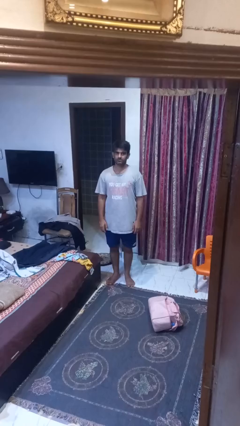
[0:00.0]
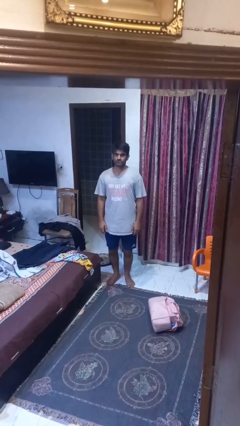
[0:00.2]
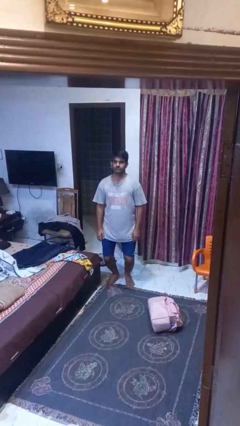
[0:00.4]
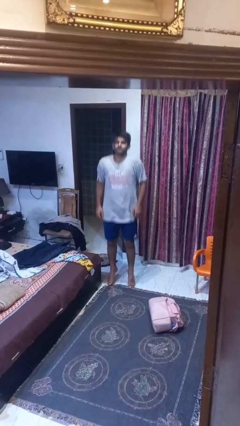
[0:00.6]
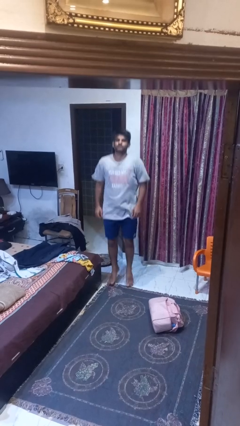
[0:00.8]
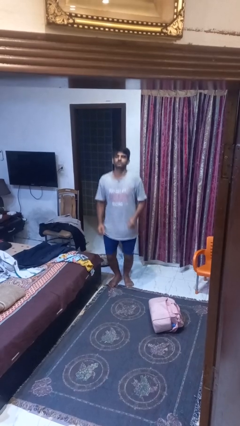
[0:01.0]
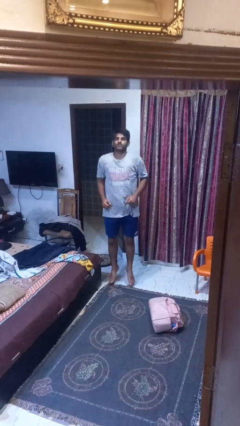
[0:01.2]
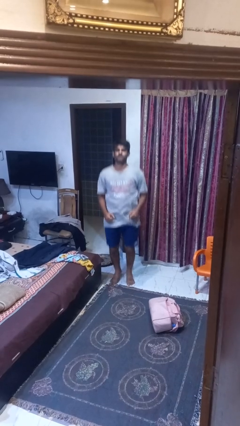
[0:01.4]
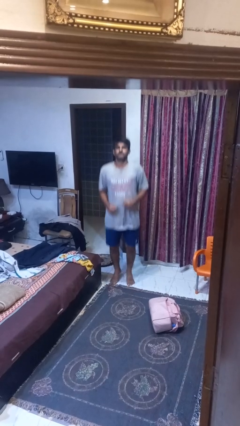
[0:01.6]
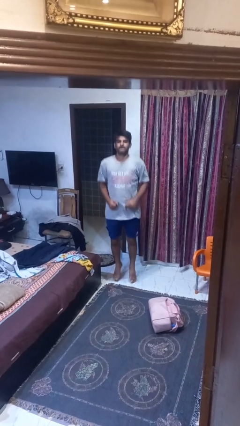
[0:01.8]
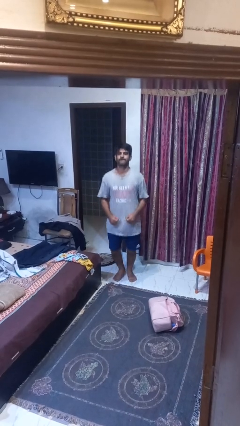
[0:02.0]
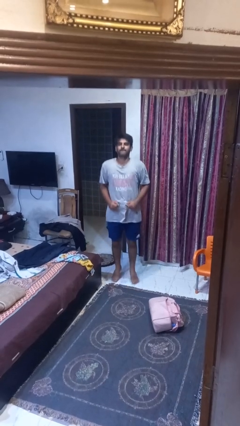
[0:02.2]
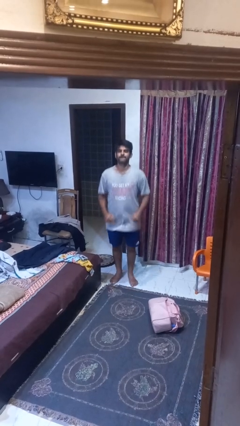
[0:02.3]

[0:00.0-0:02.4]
person jumps

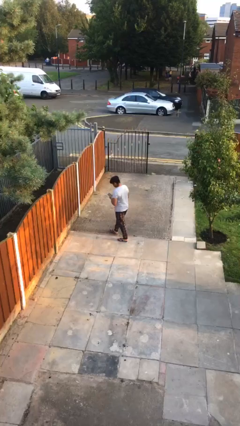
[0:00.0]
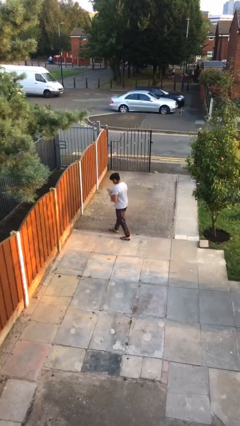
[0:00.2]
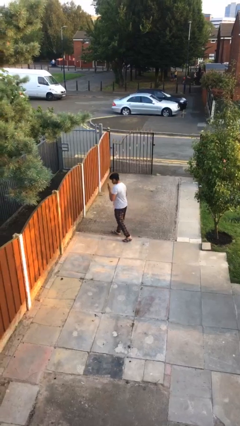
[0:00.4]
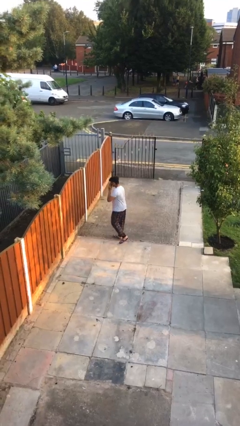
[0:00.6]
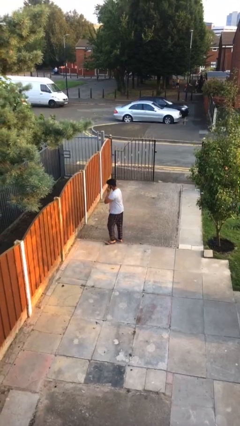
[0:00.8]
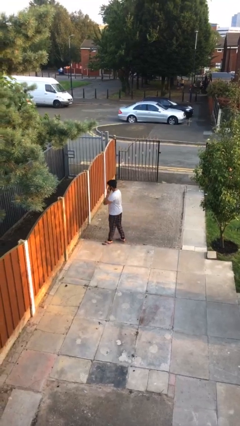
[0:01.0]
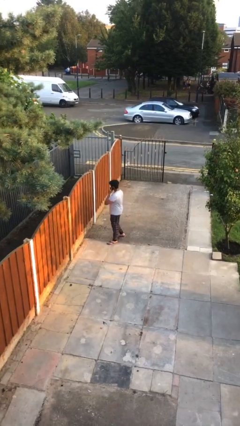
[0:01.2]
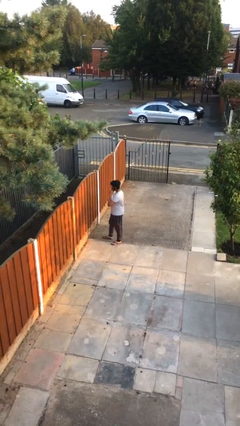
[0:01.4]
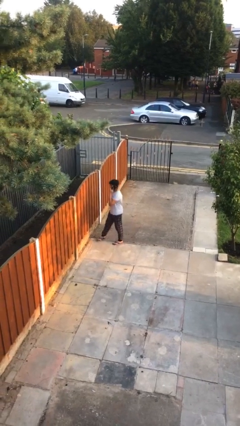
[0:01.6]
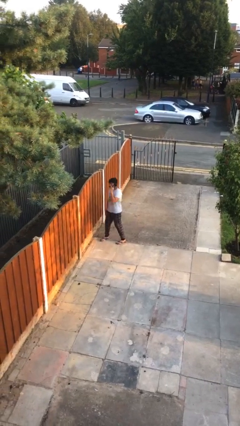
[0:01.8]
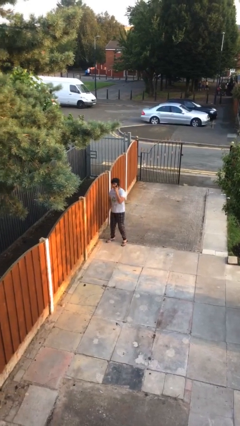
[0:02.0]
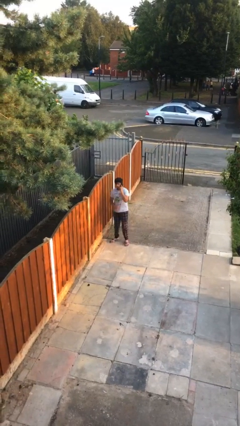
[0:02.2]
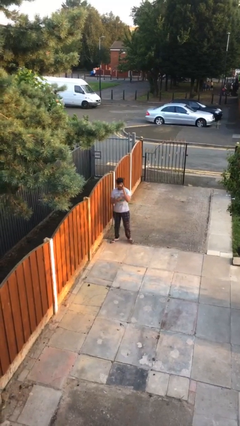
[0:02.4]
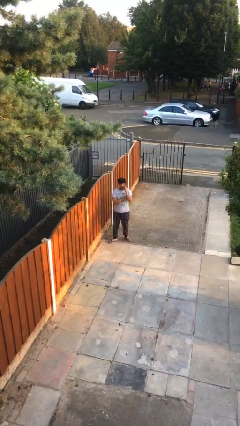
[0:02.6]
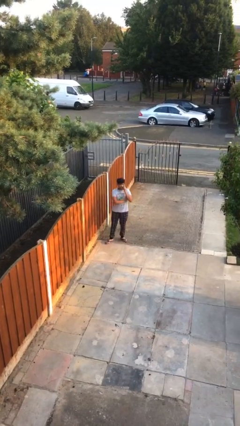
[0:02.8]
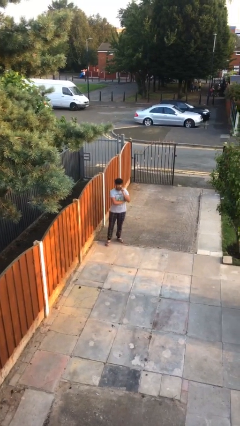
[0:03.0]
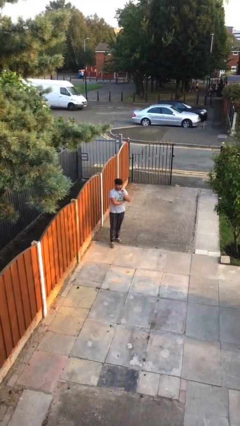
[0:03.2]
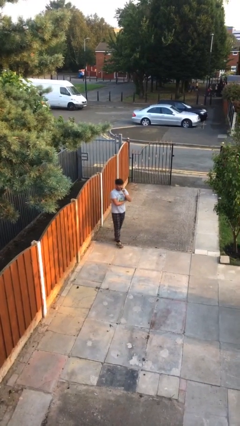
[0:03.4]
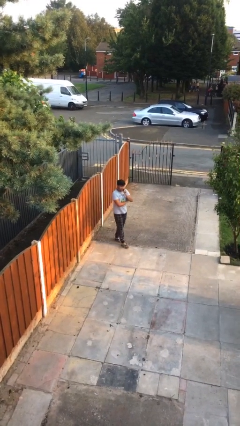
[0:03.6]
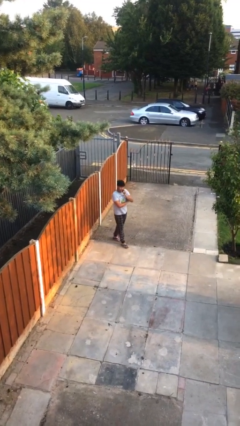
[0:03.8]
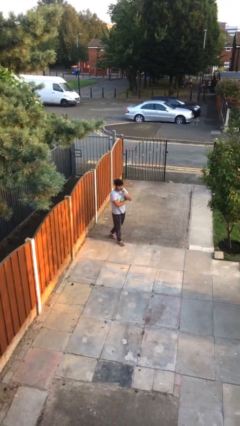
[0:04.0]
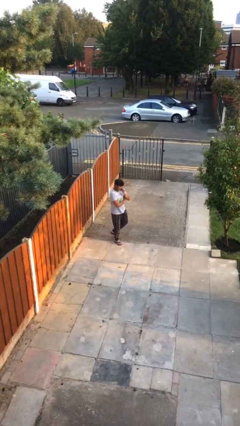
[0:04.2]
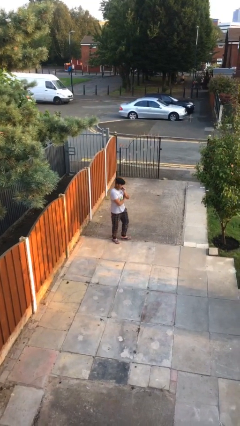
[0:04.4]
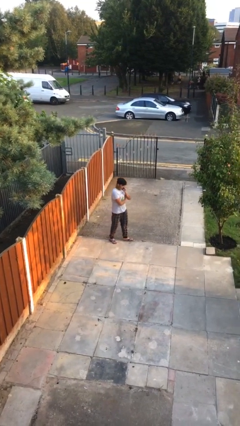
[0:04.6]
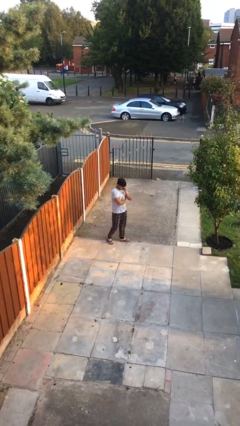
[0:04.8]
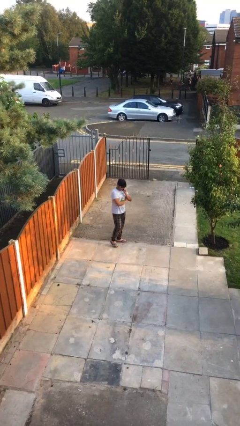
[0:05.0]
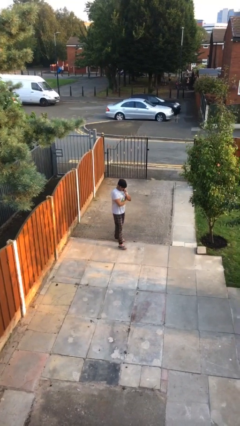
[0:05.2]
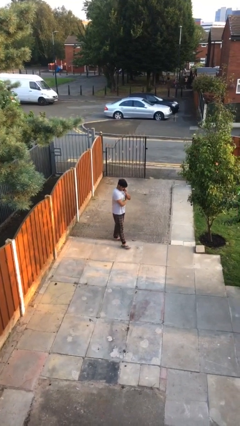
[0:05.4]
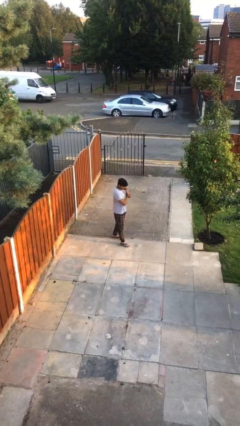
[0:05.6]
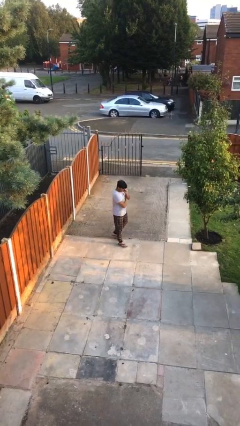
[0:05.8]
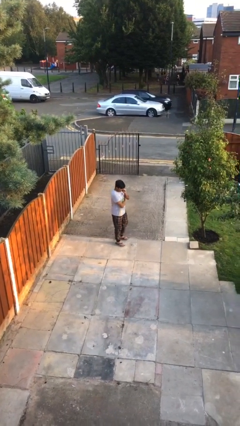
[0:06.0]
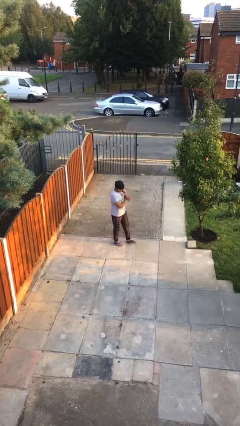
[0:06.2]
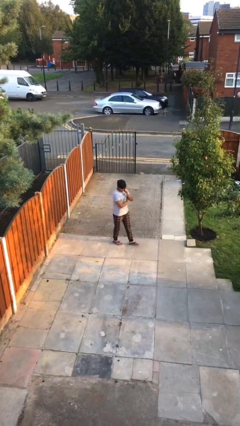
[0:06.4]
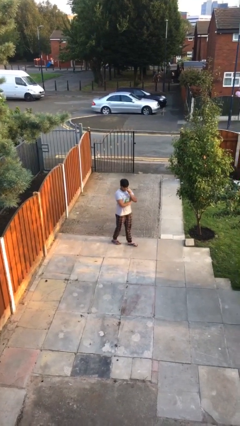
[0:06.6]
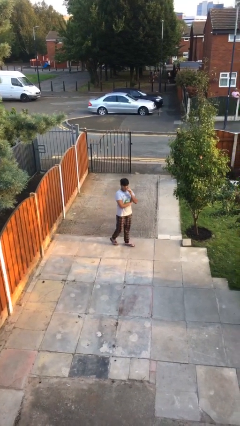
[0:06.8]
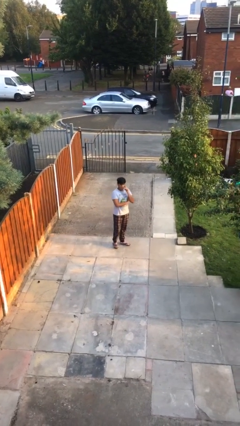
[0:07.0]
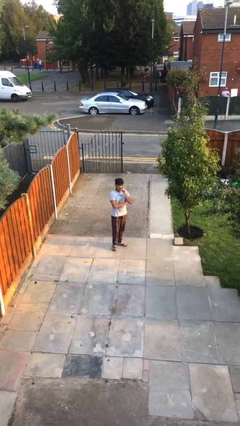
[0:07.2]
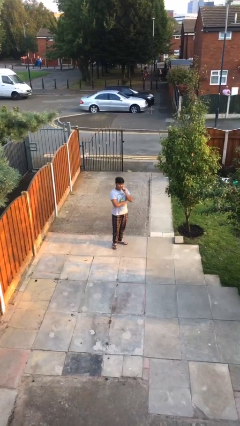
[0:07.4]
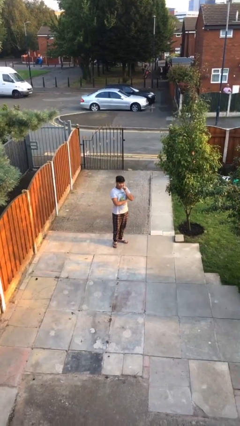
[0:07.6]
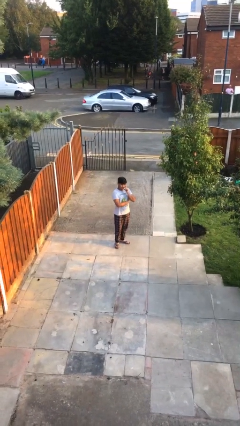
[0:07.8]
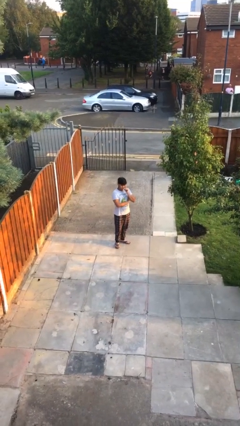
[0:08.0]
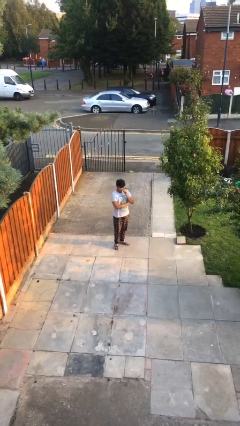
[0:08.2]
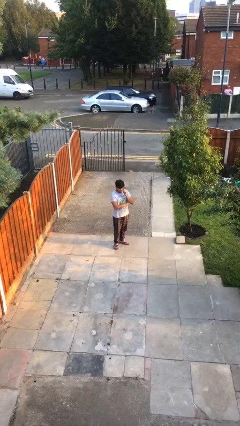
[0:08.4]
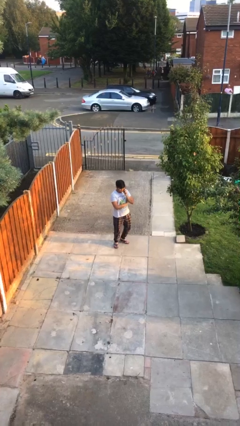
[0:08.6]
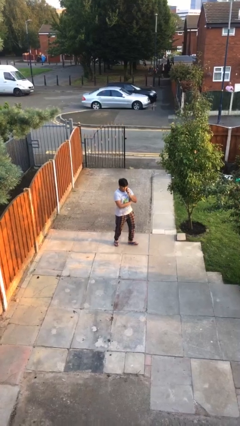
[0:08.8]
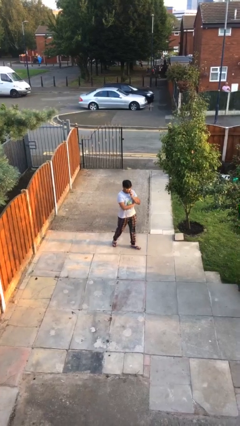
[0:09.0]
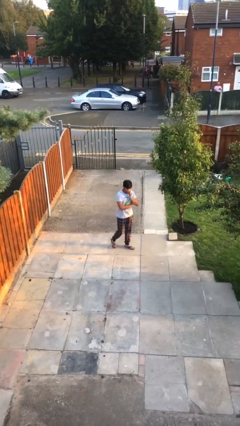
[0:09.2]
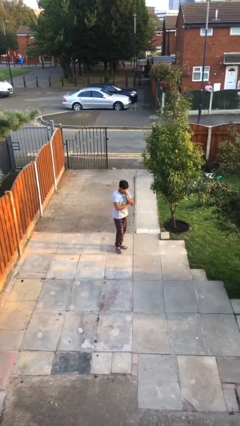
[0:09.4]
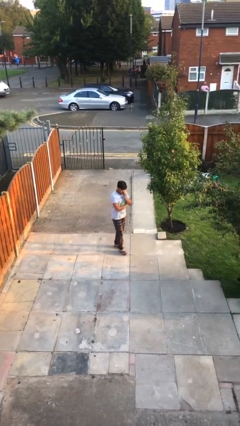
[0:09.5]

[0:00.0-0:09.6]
person talks on phone

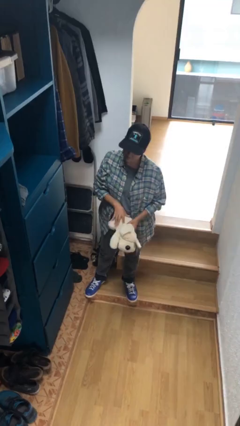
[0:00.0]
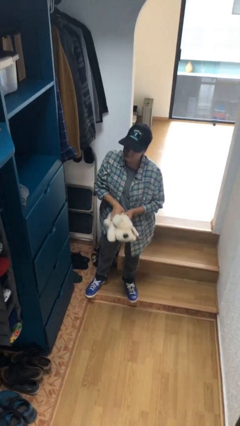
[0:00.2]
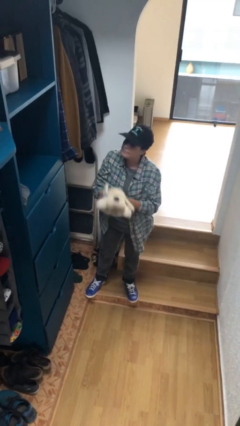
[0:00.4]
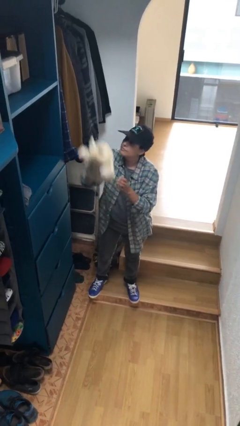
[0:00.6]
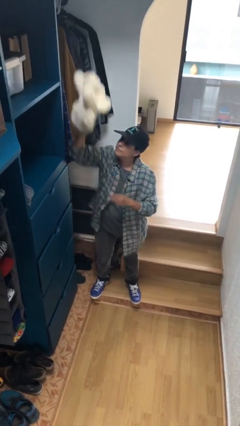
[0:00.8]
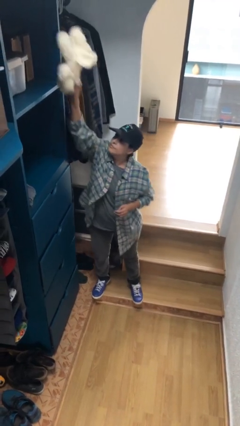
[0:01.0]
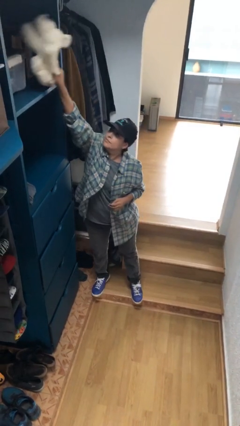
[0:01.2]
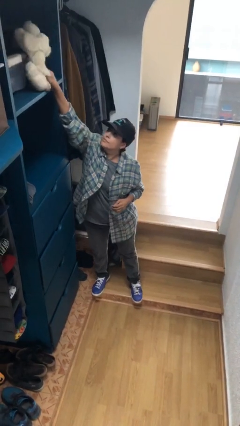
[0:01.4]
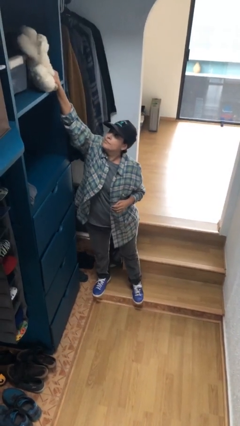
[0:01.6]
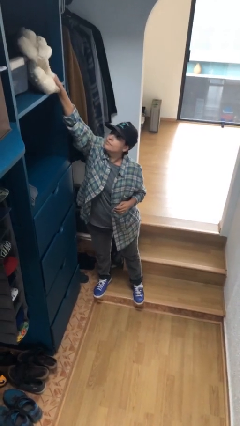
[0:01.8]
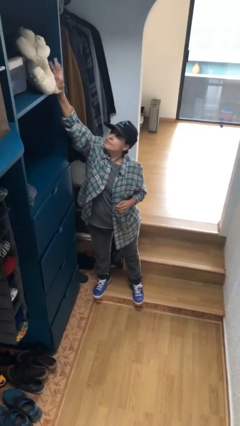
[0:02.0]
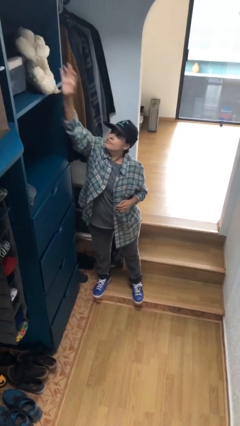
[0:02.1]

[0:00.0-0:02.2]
person puts down object on shelf

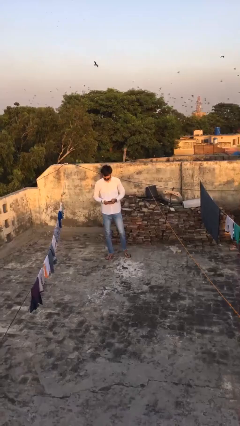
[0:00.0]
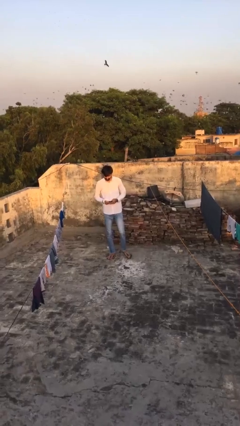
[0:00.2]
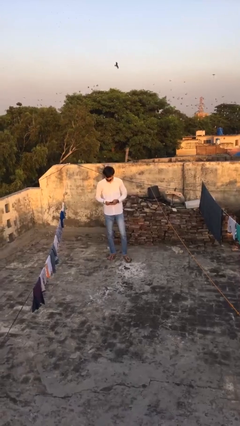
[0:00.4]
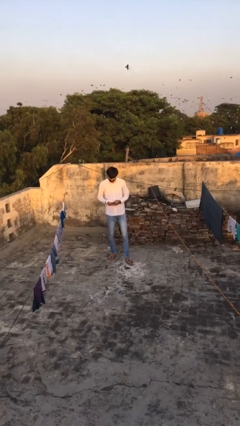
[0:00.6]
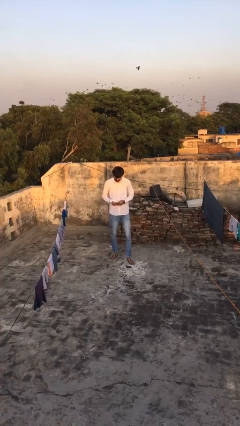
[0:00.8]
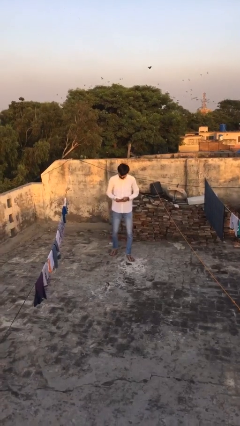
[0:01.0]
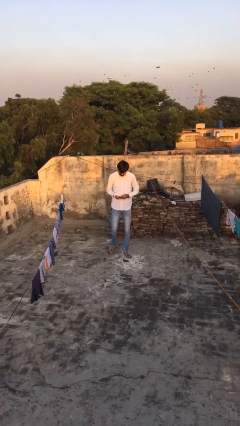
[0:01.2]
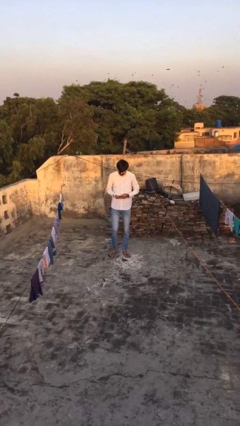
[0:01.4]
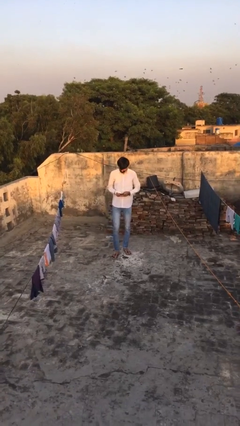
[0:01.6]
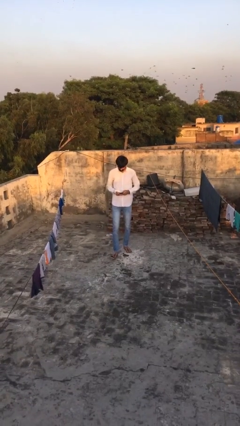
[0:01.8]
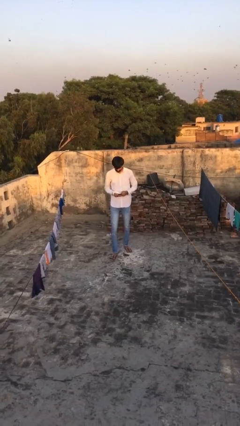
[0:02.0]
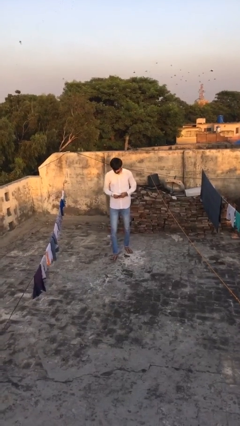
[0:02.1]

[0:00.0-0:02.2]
person texts on phone

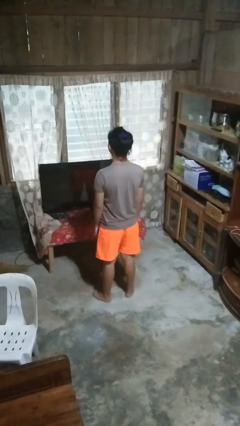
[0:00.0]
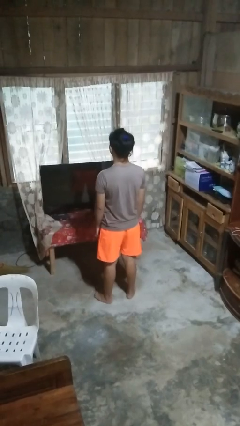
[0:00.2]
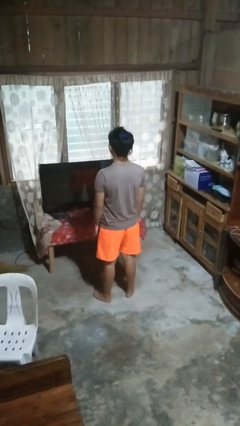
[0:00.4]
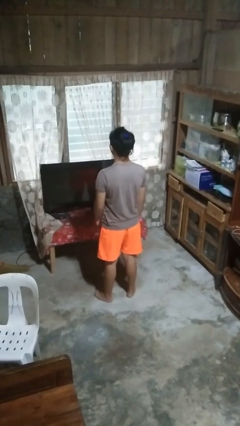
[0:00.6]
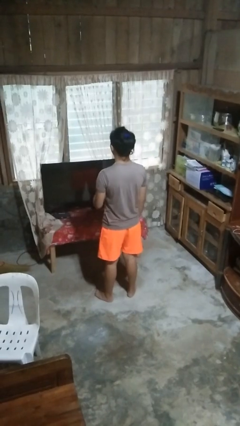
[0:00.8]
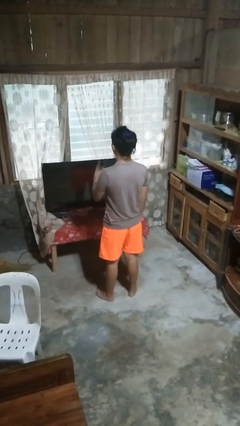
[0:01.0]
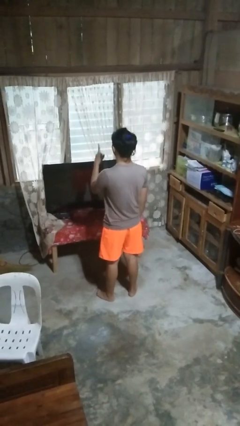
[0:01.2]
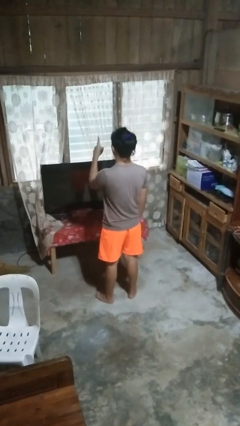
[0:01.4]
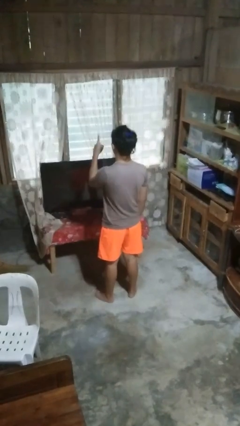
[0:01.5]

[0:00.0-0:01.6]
person gestures number one

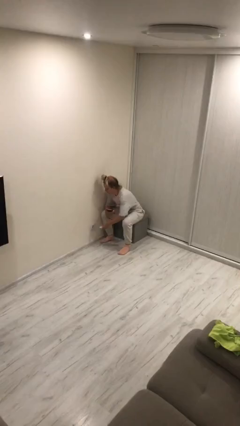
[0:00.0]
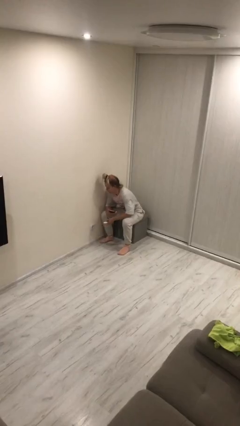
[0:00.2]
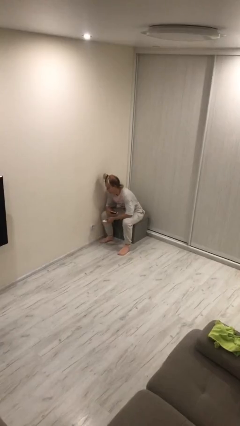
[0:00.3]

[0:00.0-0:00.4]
person unplugs from electrical socket
